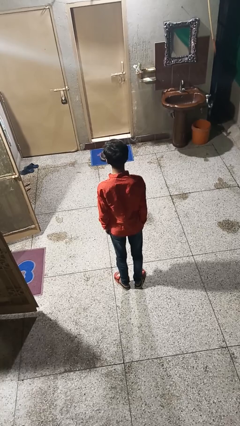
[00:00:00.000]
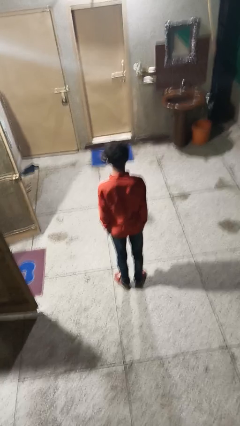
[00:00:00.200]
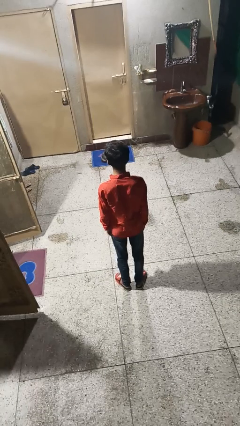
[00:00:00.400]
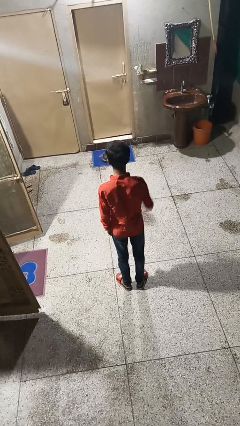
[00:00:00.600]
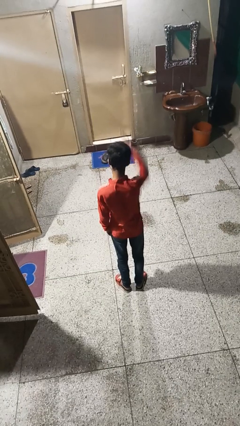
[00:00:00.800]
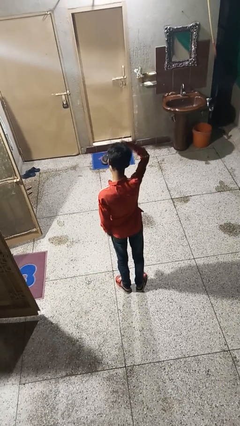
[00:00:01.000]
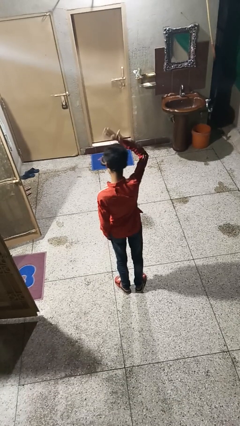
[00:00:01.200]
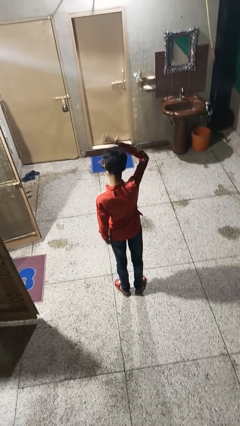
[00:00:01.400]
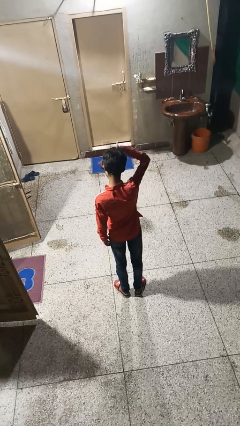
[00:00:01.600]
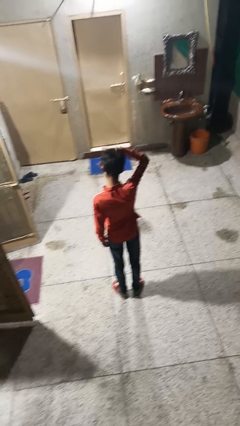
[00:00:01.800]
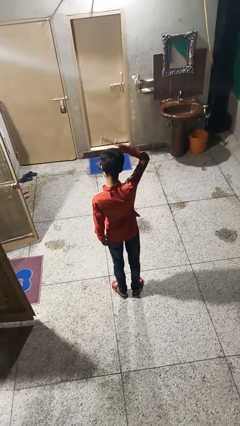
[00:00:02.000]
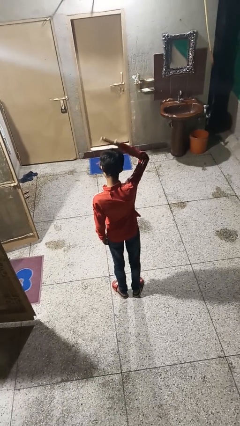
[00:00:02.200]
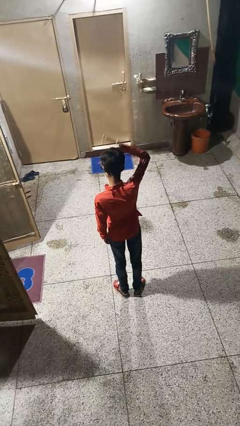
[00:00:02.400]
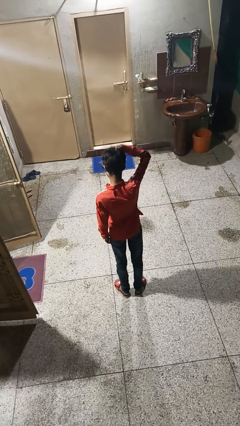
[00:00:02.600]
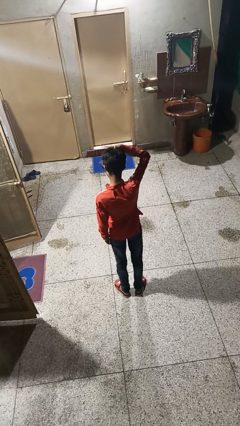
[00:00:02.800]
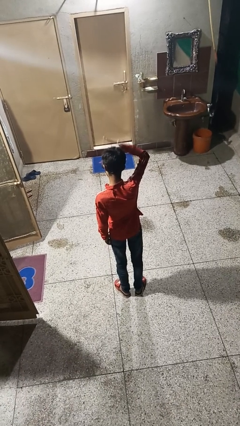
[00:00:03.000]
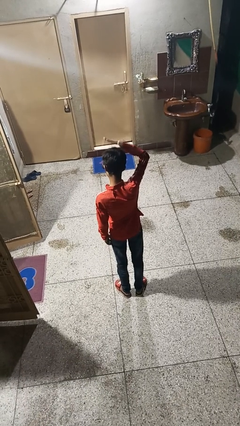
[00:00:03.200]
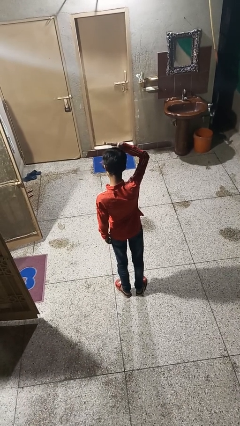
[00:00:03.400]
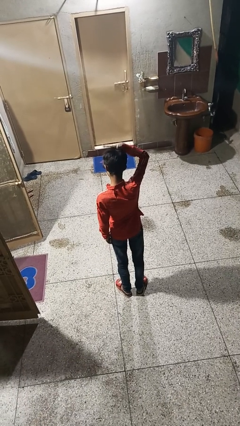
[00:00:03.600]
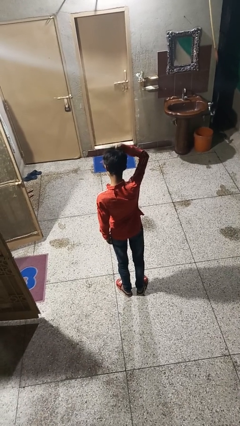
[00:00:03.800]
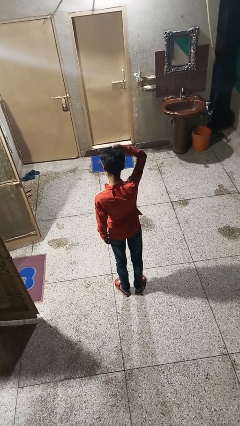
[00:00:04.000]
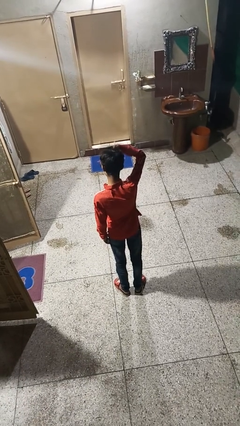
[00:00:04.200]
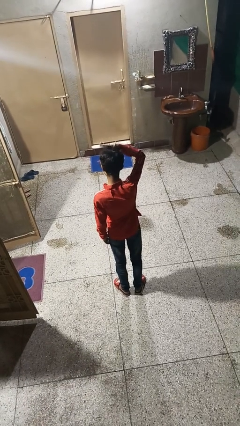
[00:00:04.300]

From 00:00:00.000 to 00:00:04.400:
person pats head

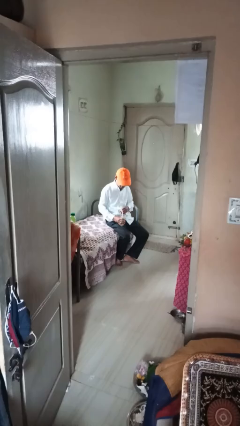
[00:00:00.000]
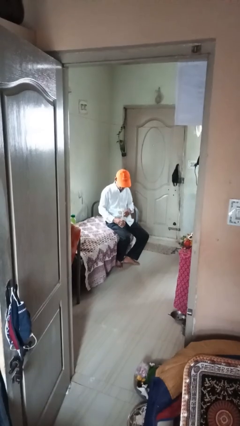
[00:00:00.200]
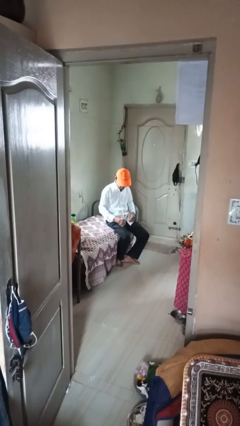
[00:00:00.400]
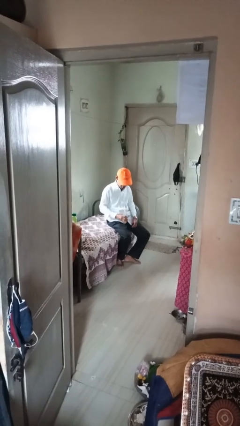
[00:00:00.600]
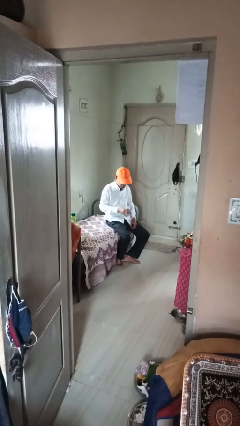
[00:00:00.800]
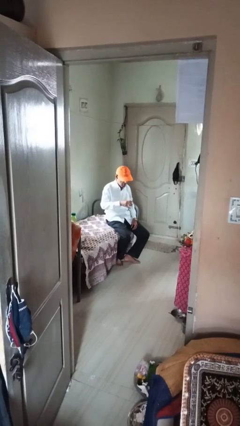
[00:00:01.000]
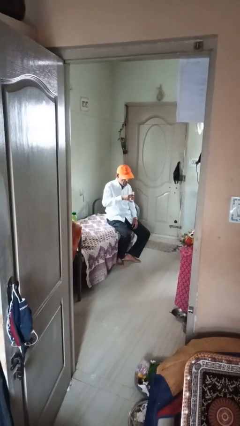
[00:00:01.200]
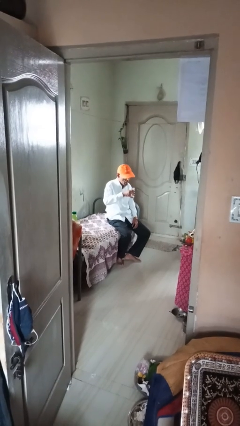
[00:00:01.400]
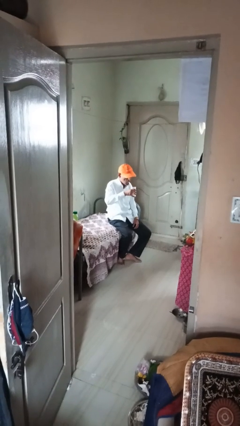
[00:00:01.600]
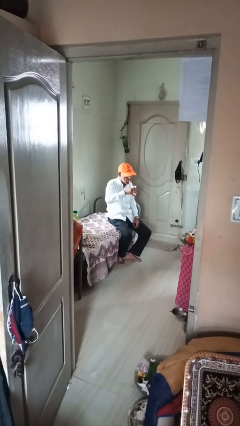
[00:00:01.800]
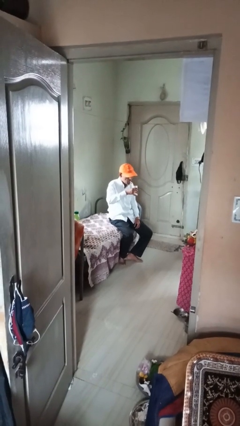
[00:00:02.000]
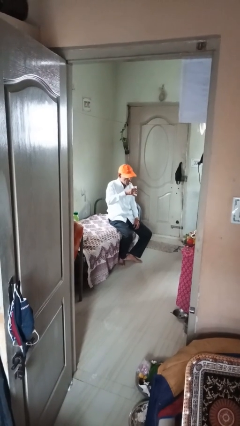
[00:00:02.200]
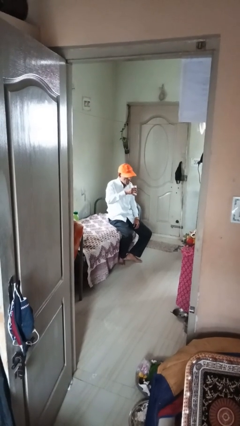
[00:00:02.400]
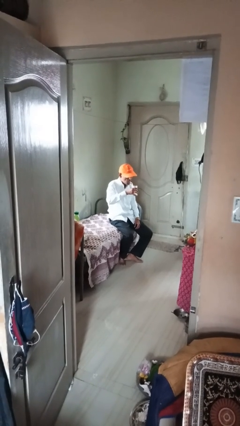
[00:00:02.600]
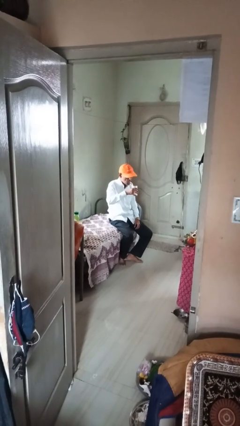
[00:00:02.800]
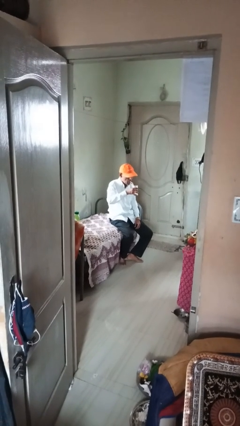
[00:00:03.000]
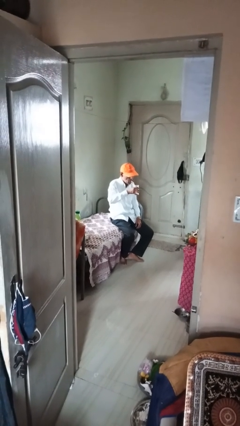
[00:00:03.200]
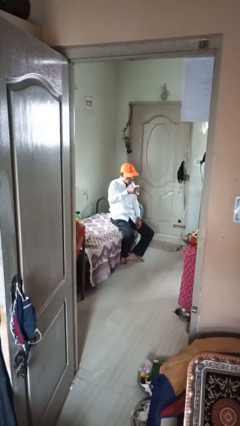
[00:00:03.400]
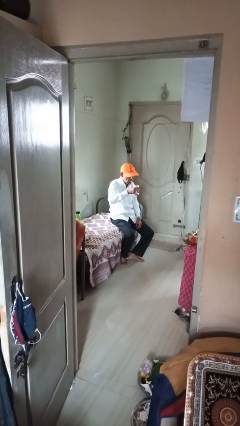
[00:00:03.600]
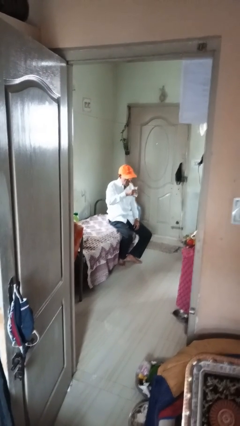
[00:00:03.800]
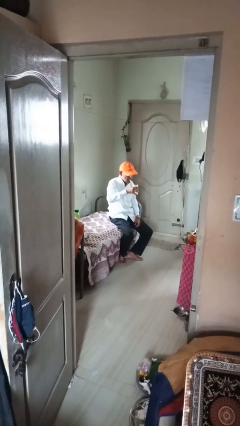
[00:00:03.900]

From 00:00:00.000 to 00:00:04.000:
person drinks from straw

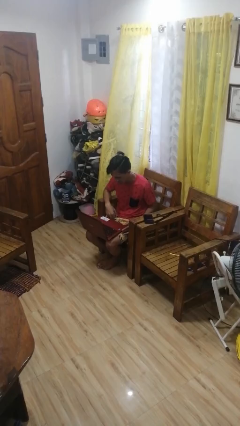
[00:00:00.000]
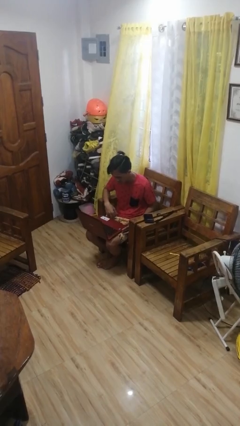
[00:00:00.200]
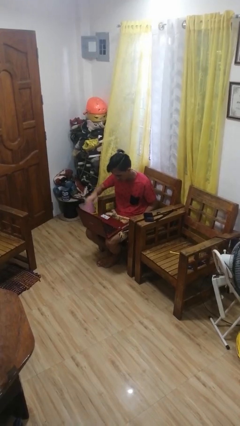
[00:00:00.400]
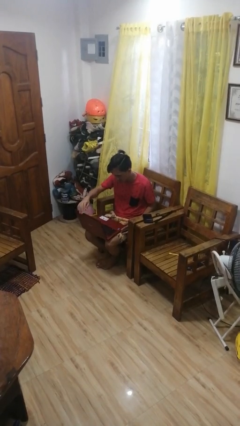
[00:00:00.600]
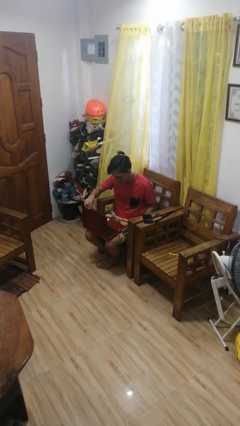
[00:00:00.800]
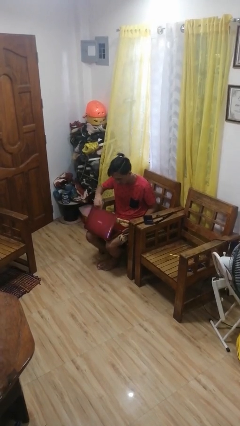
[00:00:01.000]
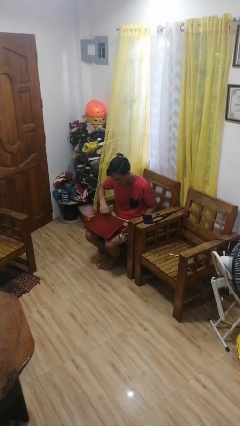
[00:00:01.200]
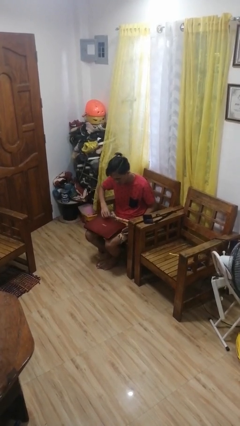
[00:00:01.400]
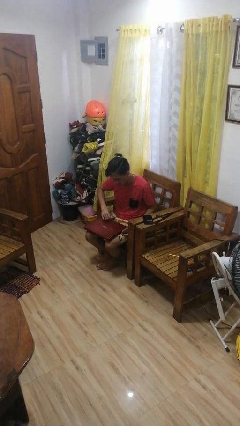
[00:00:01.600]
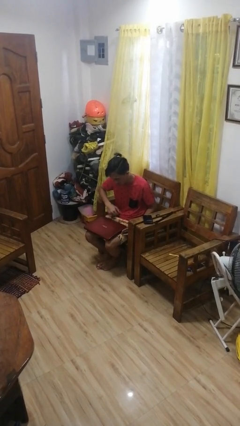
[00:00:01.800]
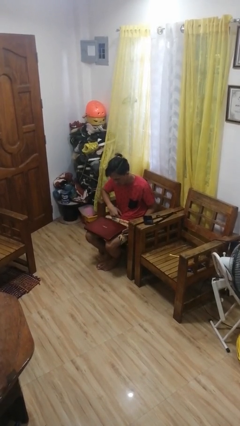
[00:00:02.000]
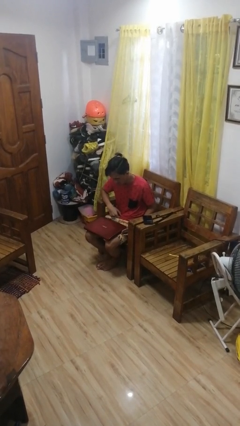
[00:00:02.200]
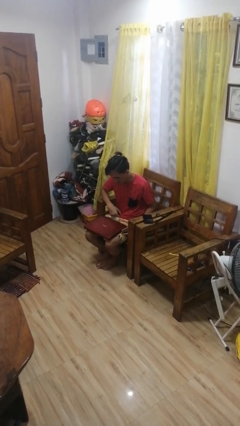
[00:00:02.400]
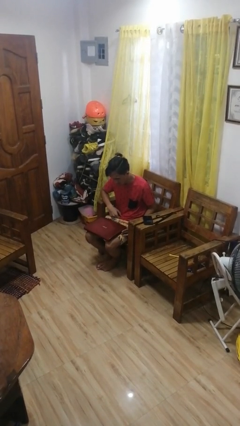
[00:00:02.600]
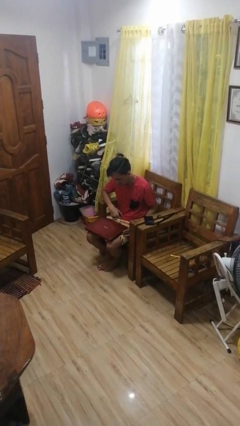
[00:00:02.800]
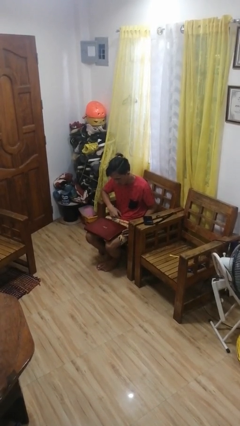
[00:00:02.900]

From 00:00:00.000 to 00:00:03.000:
person closes laptop

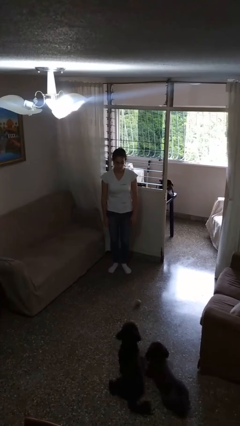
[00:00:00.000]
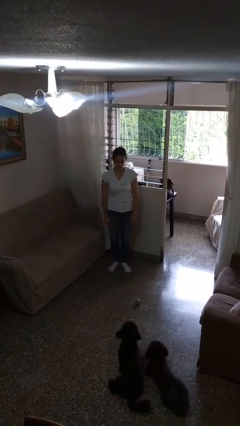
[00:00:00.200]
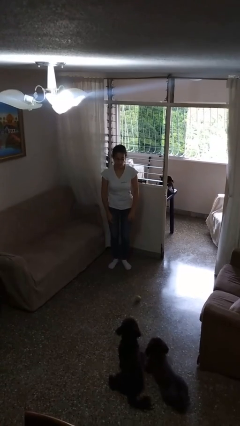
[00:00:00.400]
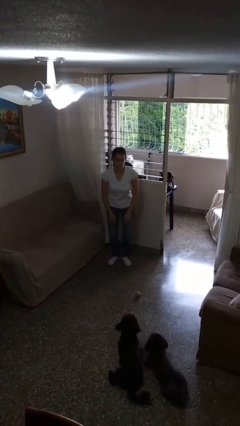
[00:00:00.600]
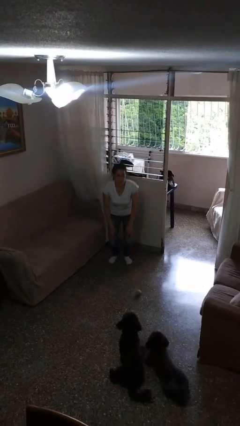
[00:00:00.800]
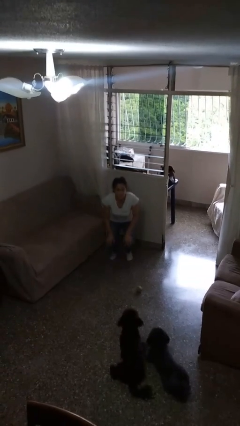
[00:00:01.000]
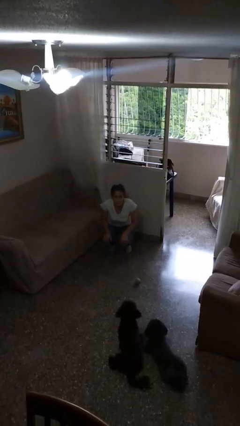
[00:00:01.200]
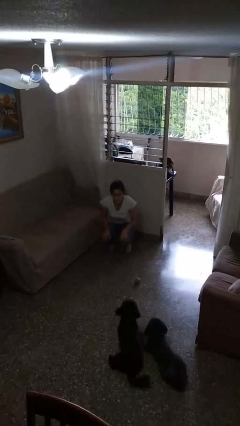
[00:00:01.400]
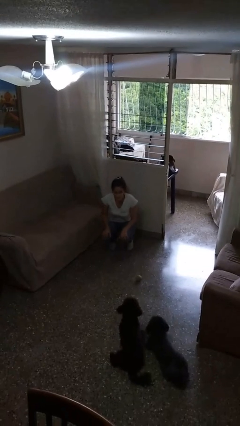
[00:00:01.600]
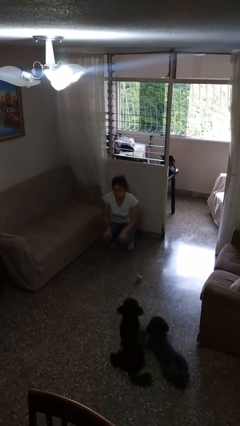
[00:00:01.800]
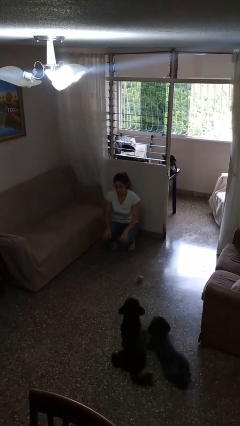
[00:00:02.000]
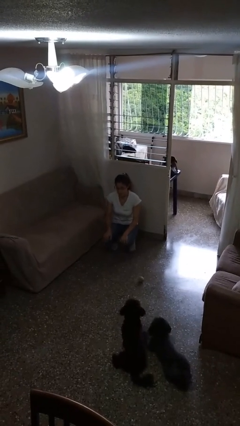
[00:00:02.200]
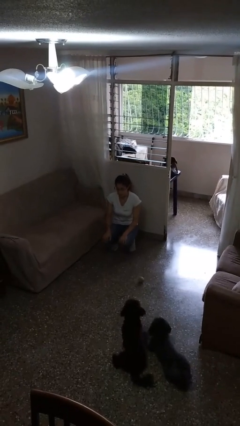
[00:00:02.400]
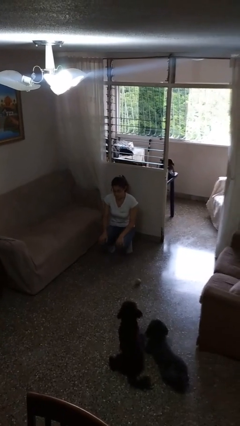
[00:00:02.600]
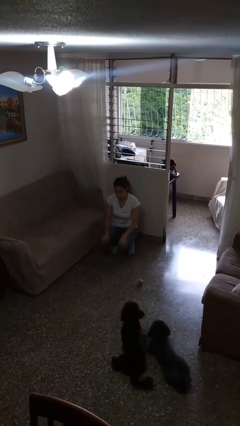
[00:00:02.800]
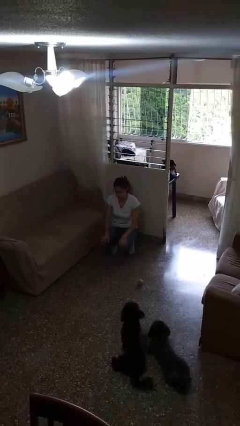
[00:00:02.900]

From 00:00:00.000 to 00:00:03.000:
person squats

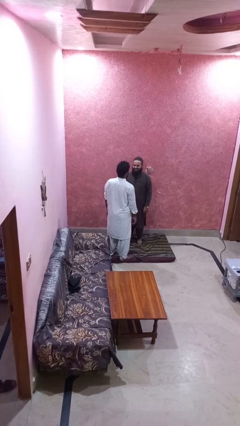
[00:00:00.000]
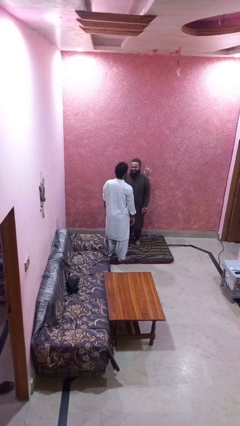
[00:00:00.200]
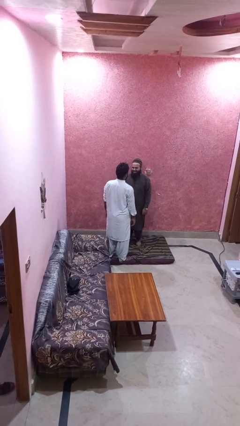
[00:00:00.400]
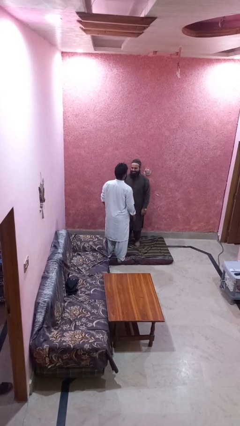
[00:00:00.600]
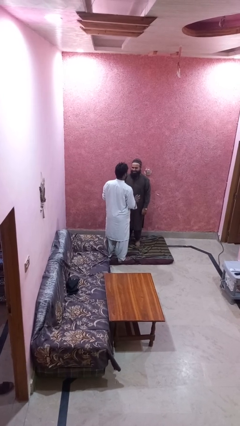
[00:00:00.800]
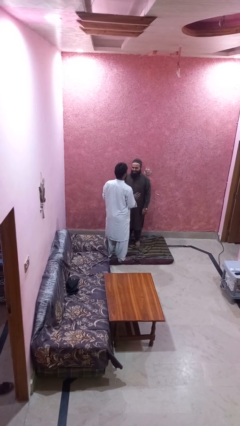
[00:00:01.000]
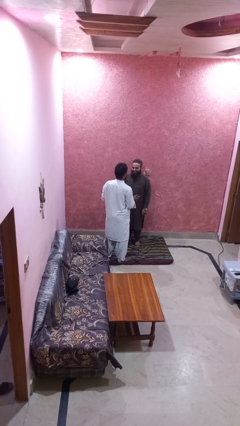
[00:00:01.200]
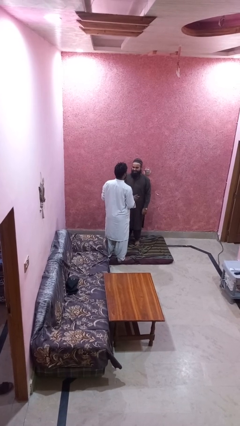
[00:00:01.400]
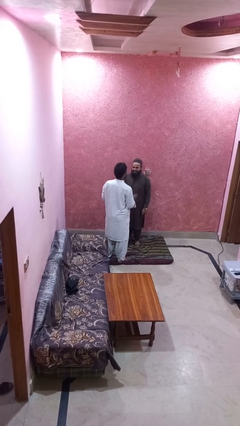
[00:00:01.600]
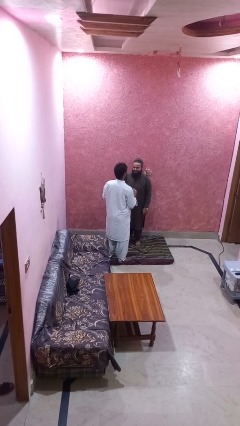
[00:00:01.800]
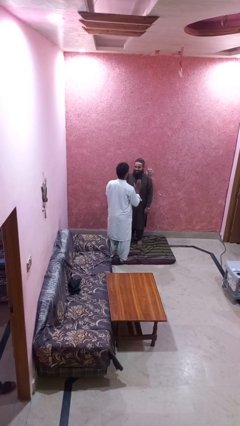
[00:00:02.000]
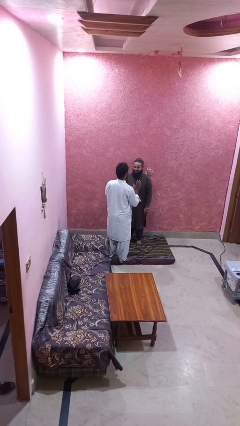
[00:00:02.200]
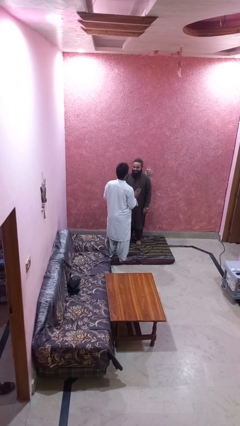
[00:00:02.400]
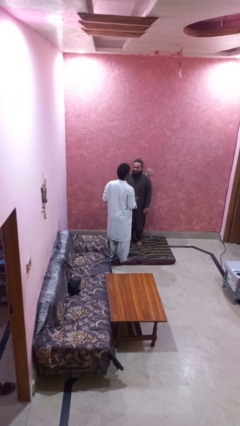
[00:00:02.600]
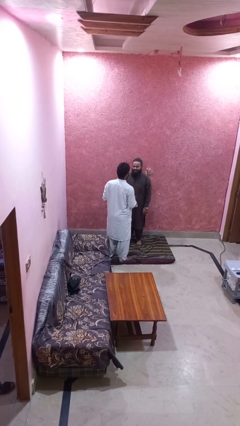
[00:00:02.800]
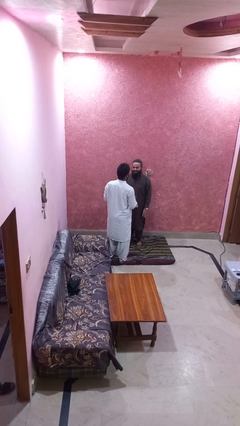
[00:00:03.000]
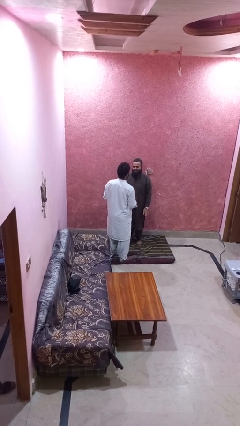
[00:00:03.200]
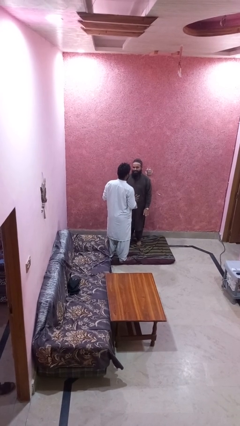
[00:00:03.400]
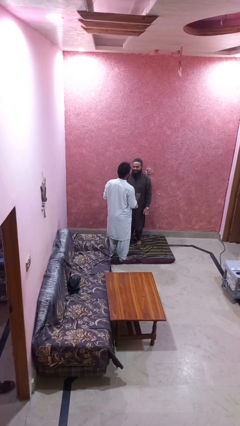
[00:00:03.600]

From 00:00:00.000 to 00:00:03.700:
person laughs with person
